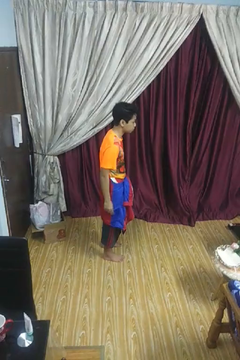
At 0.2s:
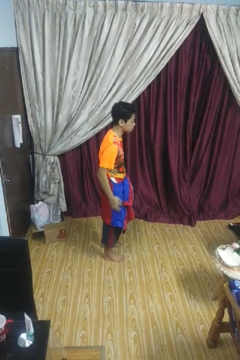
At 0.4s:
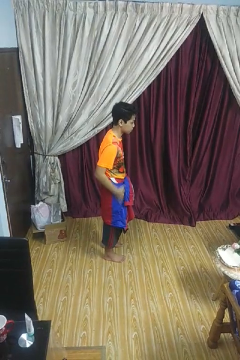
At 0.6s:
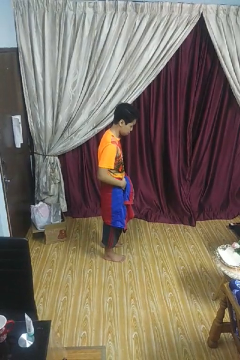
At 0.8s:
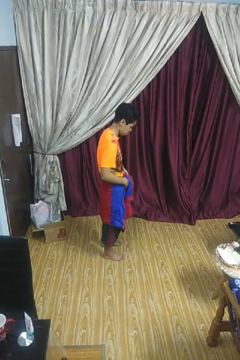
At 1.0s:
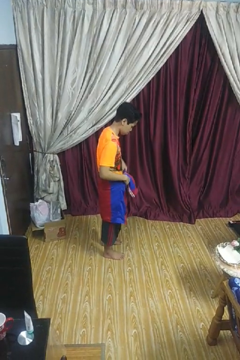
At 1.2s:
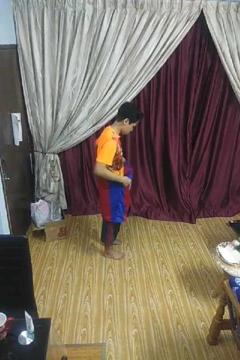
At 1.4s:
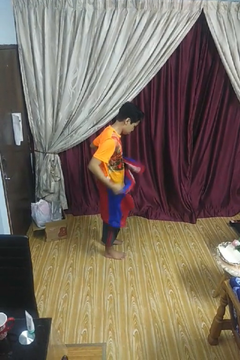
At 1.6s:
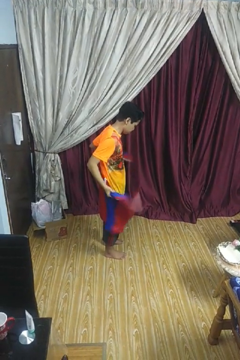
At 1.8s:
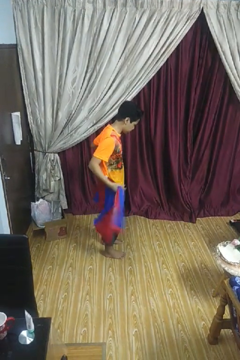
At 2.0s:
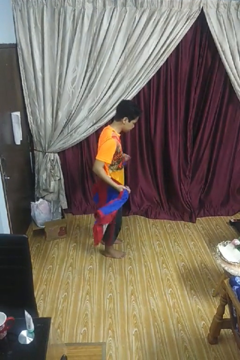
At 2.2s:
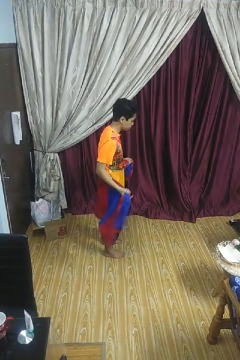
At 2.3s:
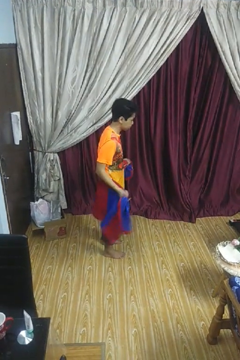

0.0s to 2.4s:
person unties jacket around waist

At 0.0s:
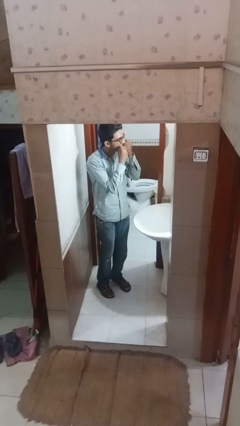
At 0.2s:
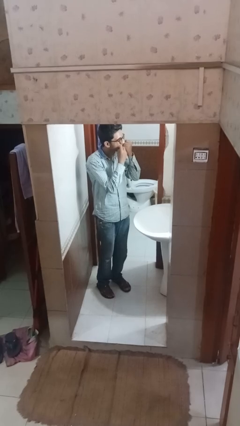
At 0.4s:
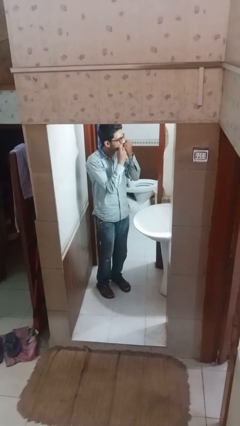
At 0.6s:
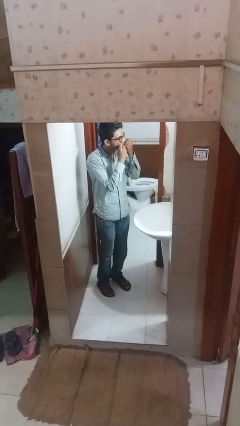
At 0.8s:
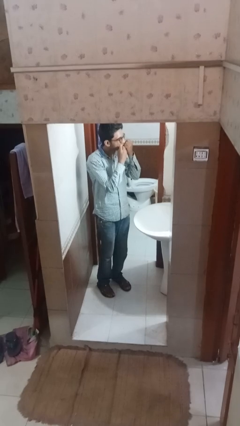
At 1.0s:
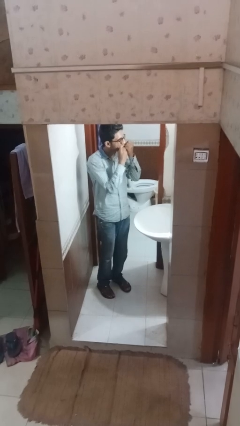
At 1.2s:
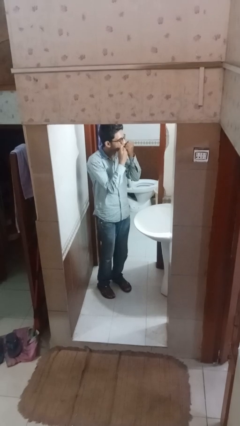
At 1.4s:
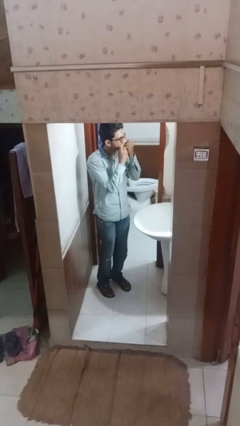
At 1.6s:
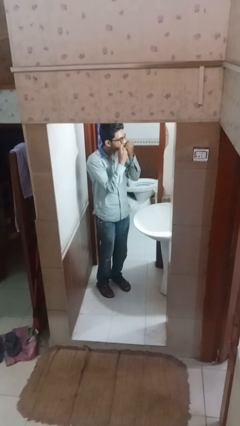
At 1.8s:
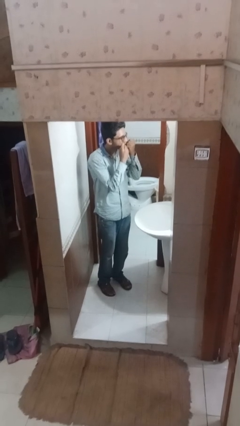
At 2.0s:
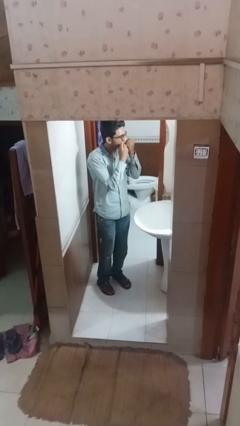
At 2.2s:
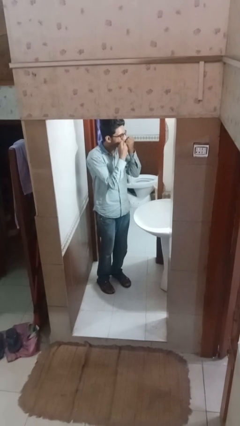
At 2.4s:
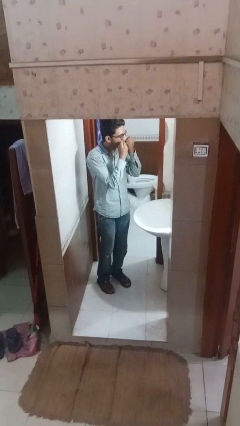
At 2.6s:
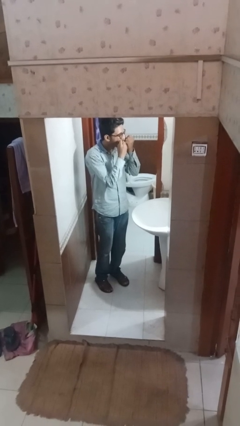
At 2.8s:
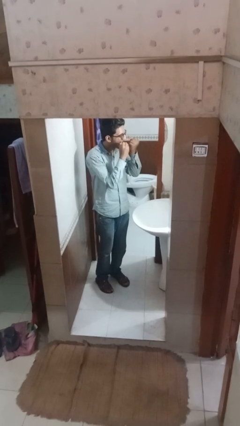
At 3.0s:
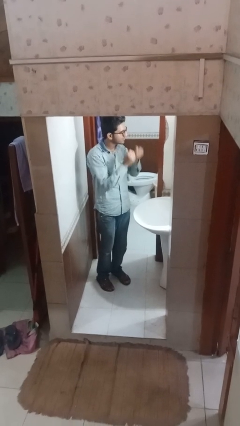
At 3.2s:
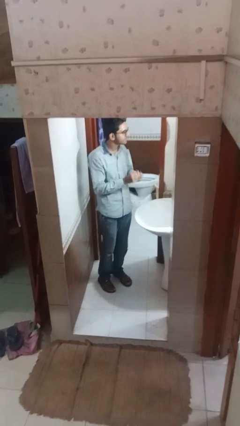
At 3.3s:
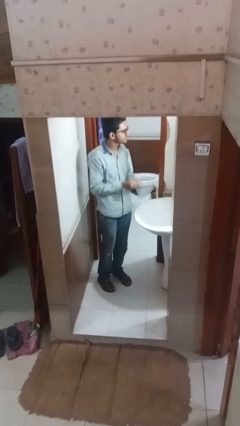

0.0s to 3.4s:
person flosses

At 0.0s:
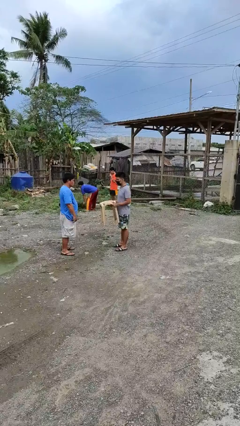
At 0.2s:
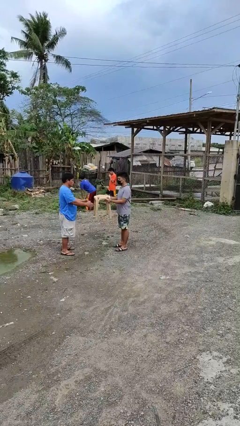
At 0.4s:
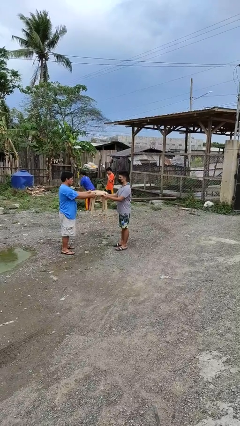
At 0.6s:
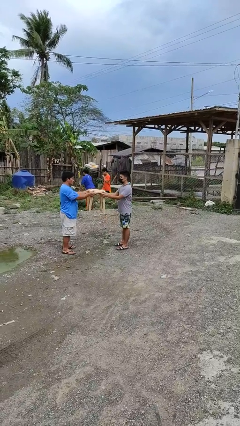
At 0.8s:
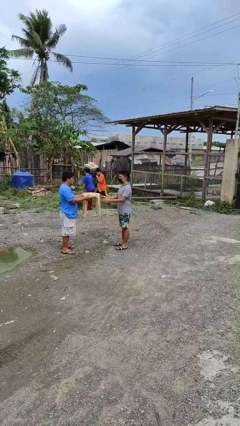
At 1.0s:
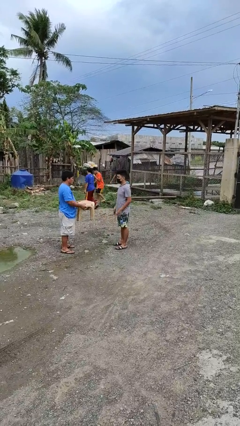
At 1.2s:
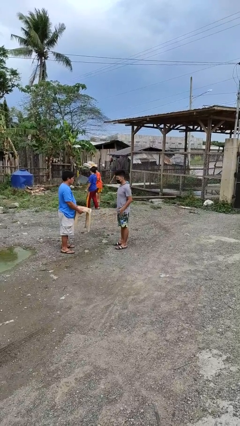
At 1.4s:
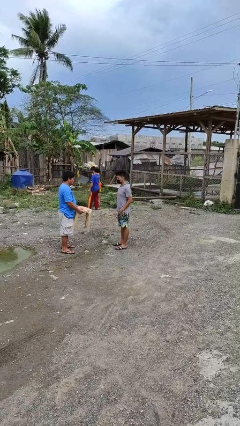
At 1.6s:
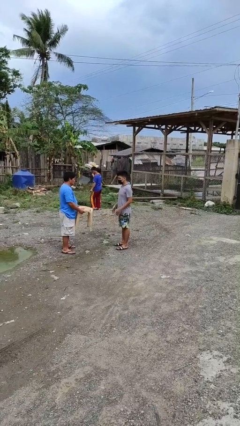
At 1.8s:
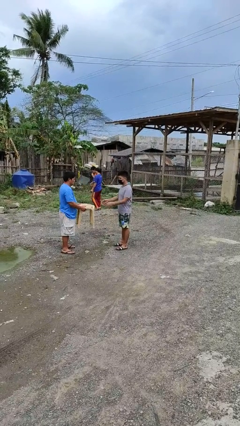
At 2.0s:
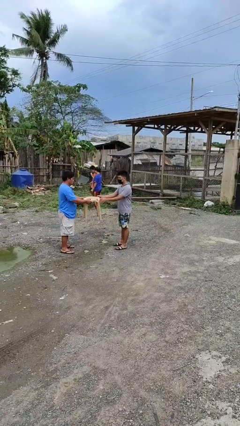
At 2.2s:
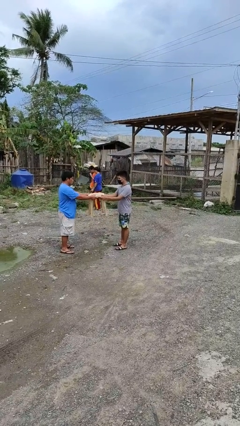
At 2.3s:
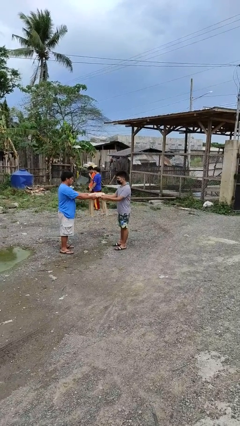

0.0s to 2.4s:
person transfers object to person

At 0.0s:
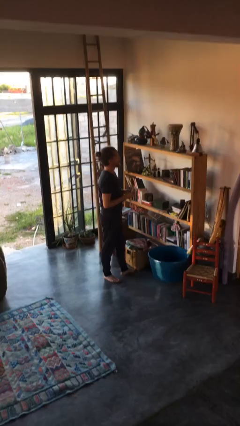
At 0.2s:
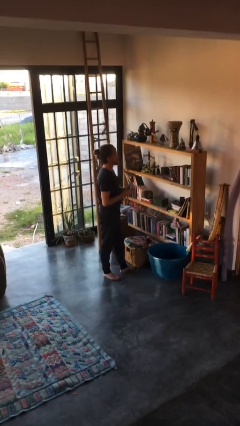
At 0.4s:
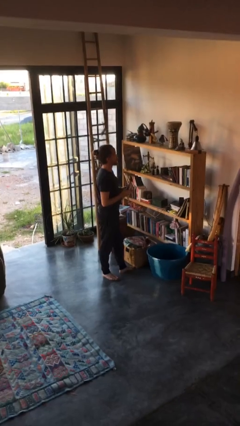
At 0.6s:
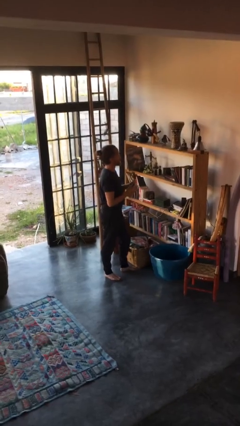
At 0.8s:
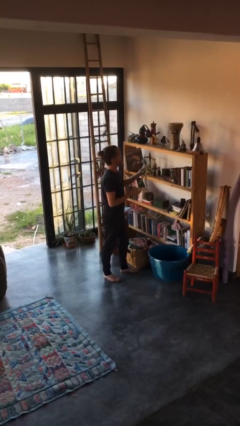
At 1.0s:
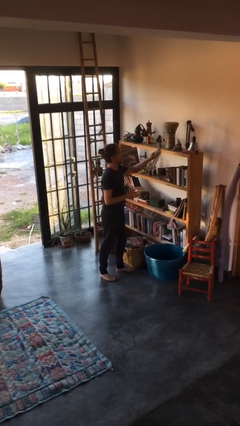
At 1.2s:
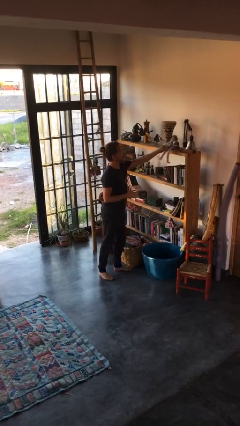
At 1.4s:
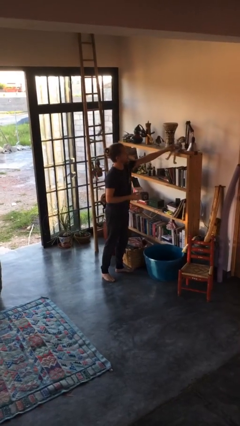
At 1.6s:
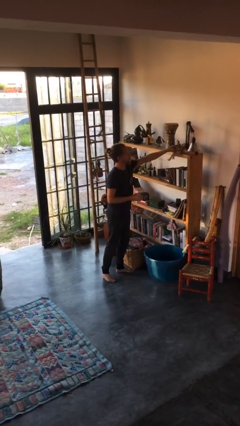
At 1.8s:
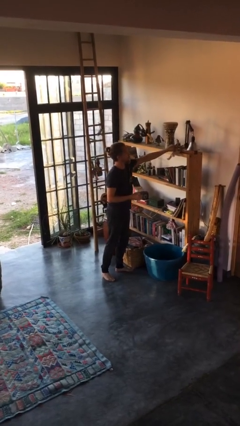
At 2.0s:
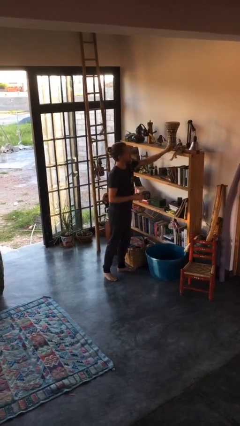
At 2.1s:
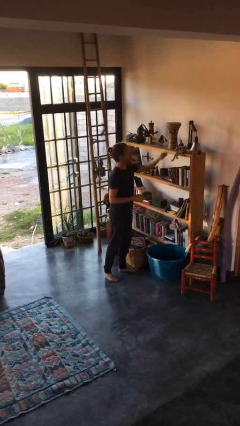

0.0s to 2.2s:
person puts down object on countertop

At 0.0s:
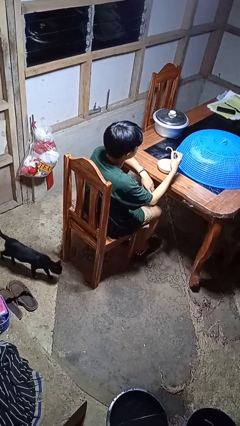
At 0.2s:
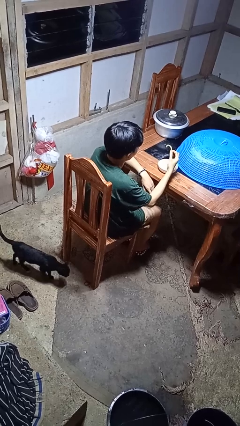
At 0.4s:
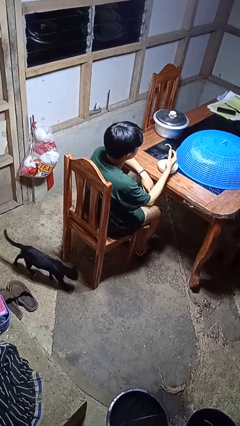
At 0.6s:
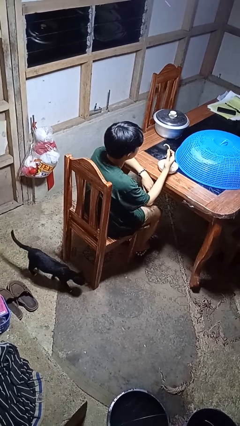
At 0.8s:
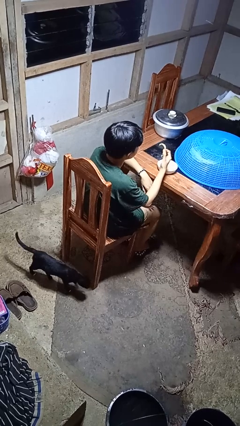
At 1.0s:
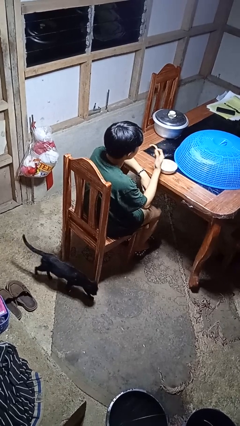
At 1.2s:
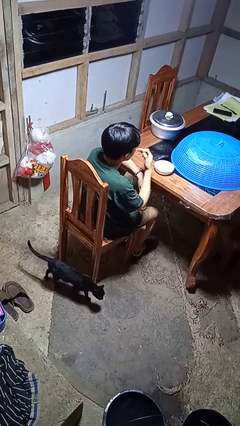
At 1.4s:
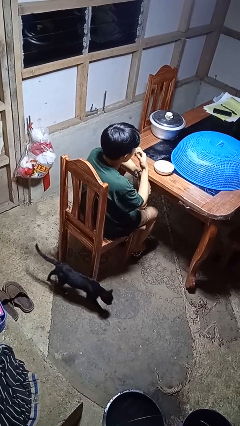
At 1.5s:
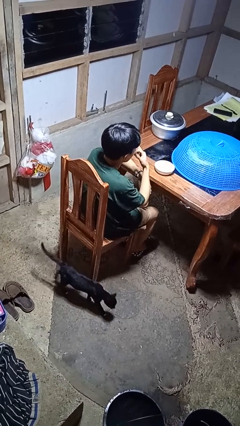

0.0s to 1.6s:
person eats with hands

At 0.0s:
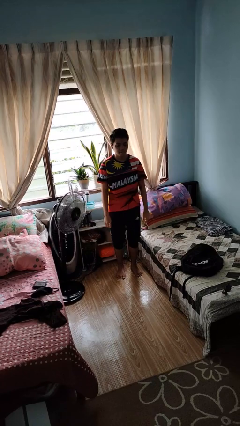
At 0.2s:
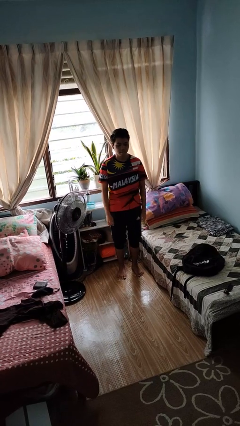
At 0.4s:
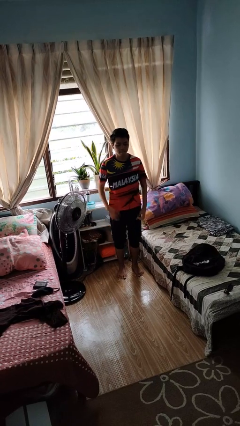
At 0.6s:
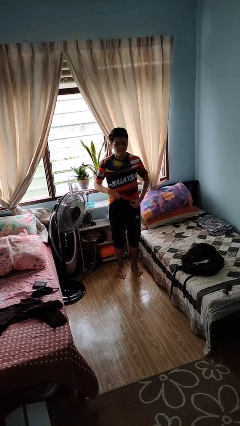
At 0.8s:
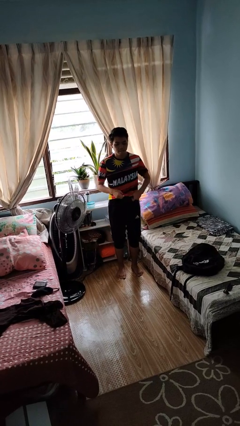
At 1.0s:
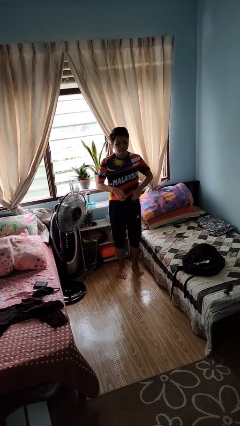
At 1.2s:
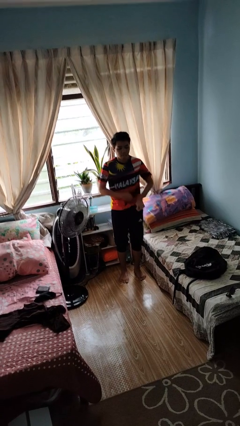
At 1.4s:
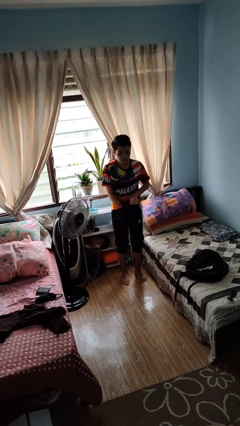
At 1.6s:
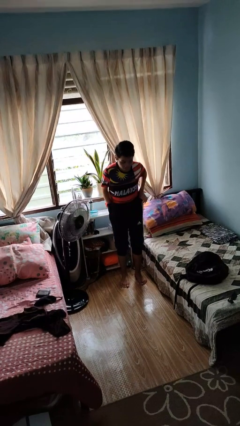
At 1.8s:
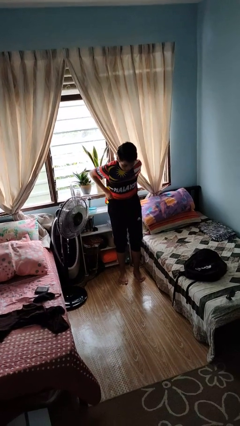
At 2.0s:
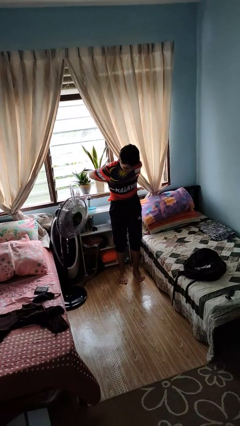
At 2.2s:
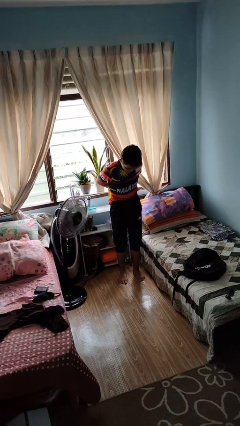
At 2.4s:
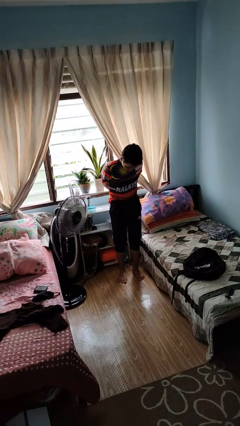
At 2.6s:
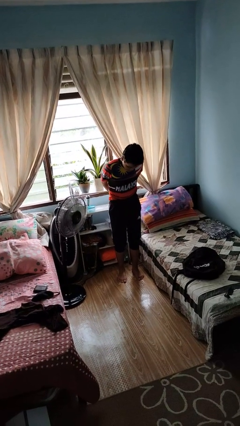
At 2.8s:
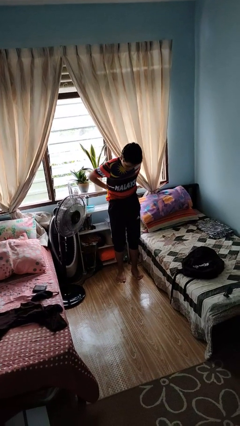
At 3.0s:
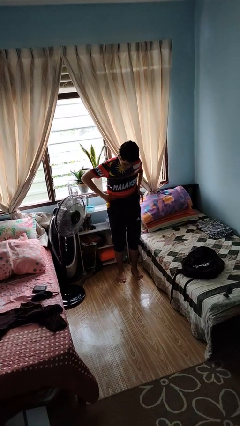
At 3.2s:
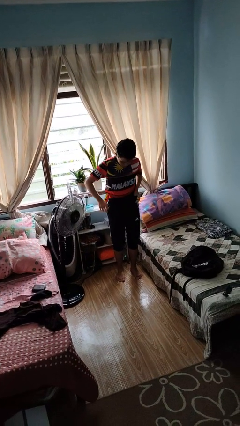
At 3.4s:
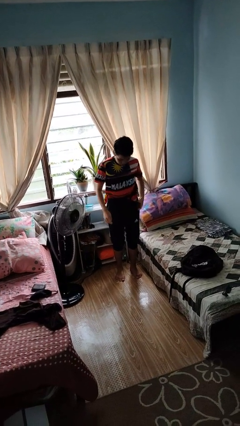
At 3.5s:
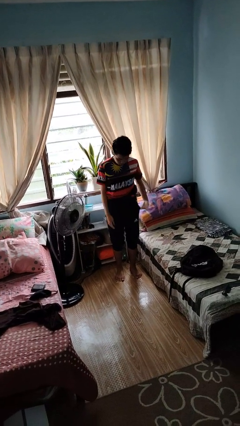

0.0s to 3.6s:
person tucks in shirt

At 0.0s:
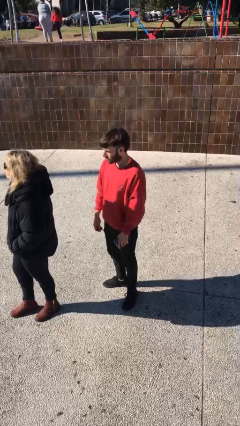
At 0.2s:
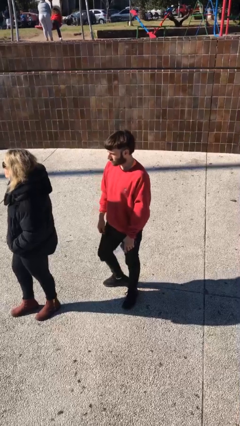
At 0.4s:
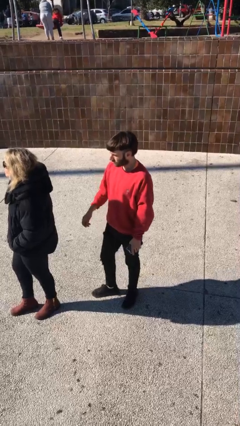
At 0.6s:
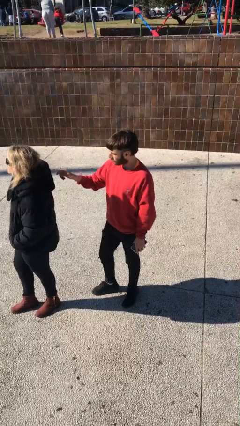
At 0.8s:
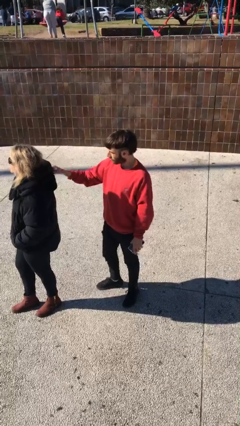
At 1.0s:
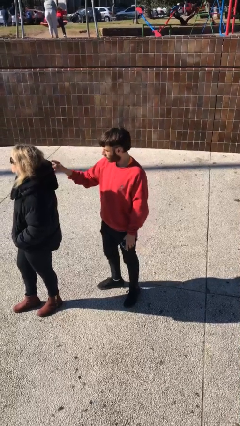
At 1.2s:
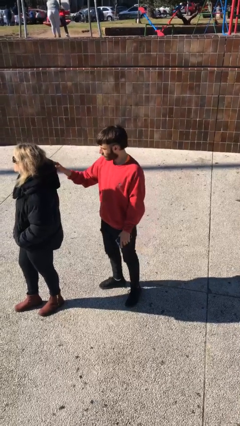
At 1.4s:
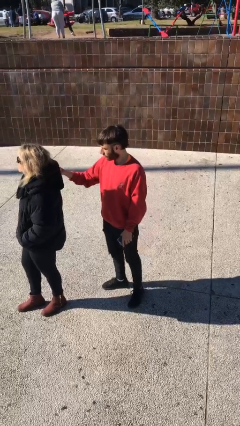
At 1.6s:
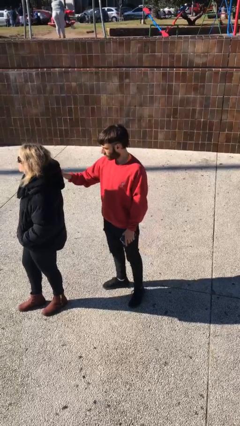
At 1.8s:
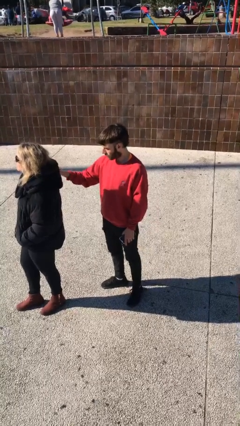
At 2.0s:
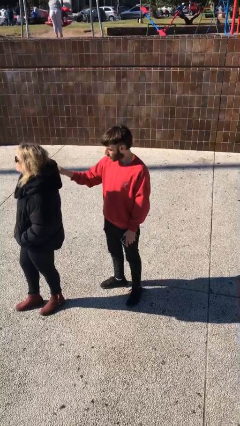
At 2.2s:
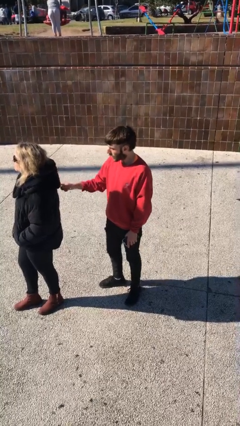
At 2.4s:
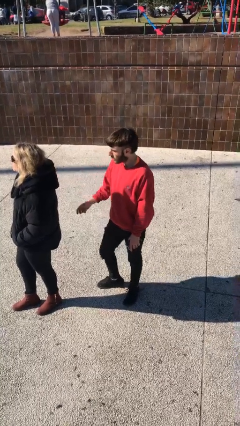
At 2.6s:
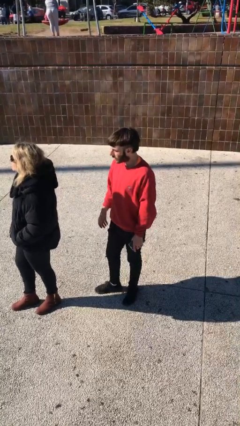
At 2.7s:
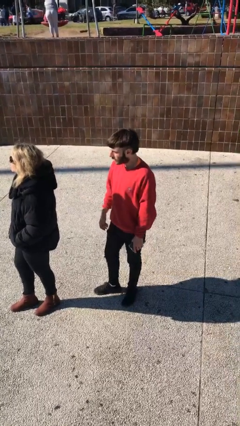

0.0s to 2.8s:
person touches back of person
